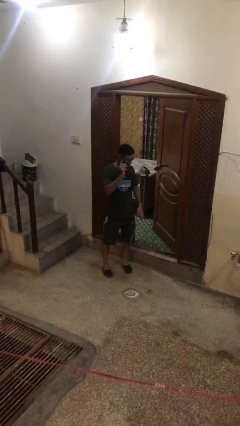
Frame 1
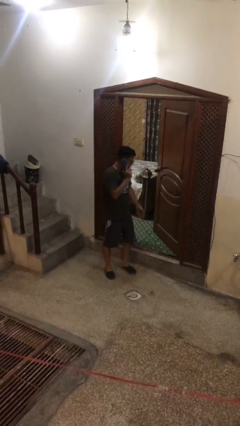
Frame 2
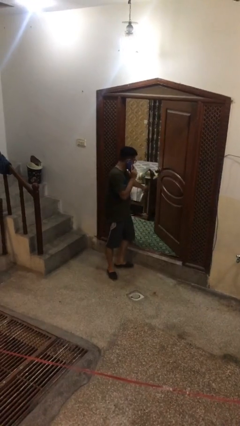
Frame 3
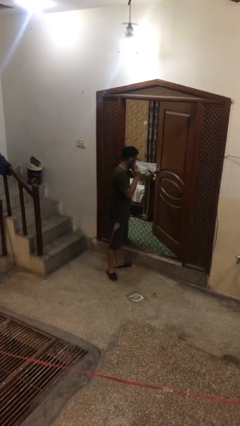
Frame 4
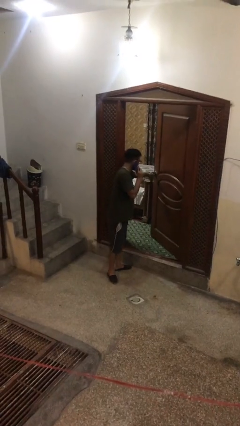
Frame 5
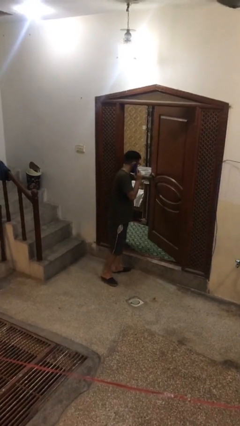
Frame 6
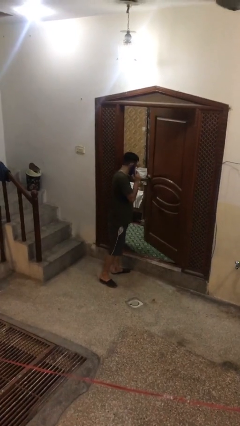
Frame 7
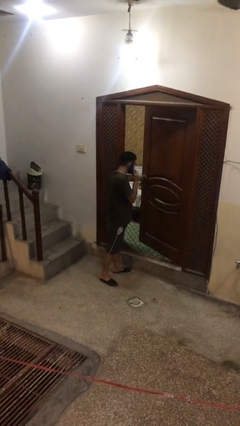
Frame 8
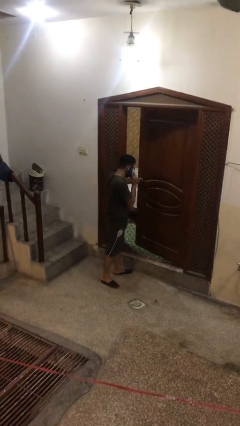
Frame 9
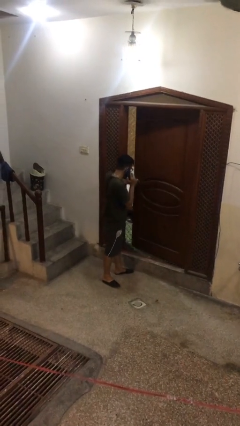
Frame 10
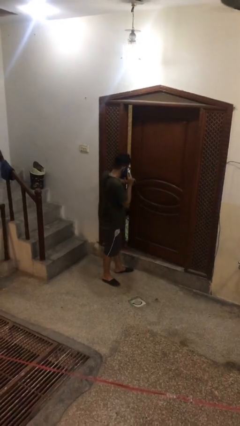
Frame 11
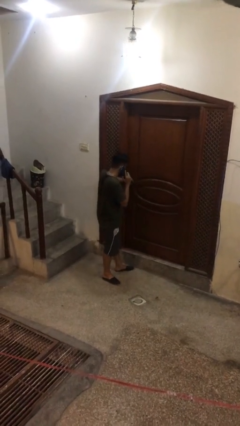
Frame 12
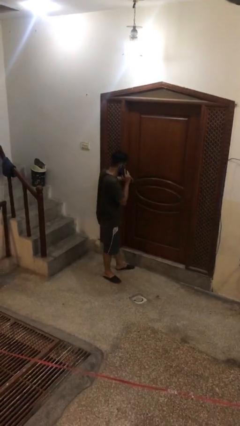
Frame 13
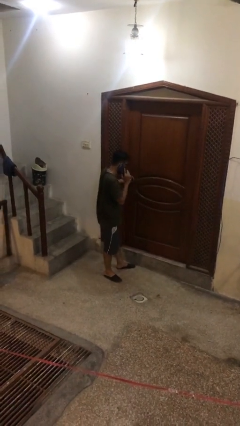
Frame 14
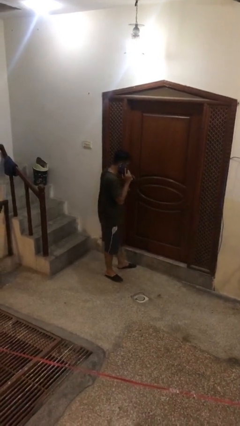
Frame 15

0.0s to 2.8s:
person closes facility door

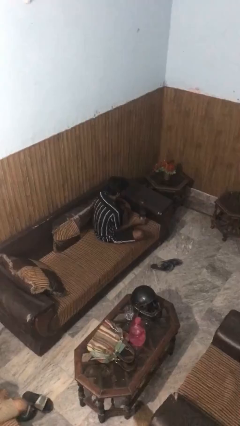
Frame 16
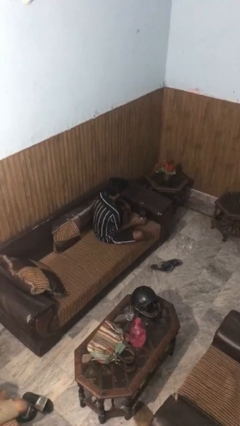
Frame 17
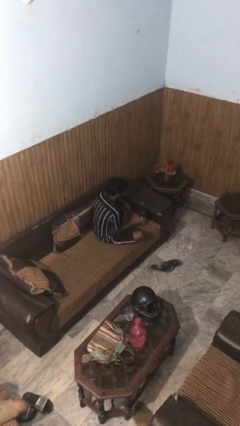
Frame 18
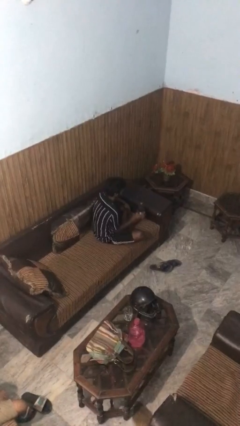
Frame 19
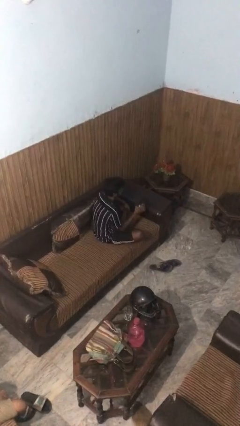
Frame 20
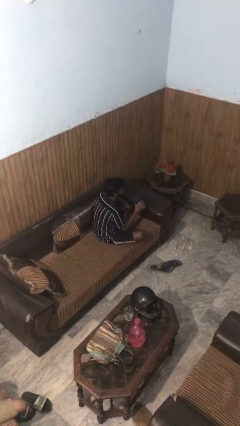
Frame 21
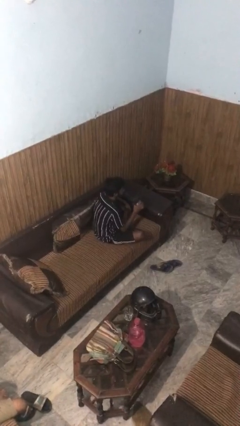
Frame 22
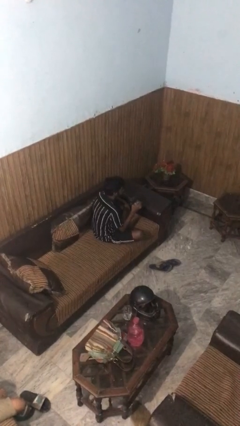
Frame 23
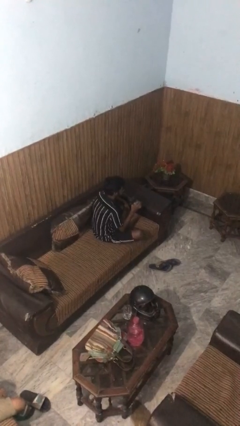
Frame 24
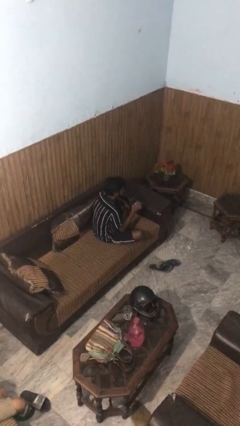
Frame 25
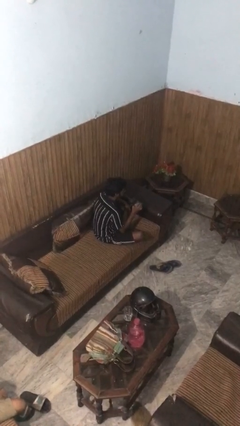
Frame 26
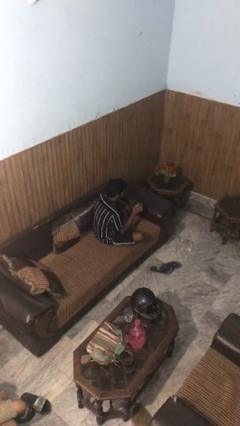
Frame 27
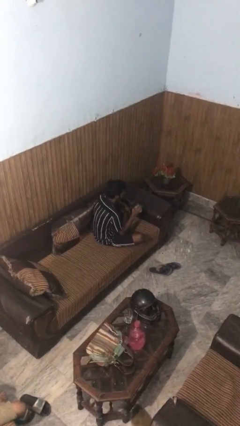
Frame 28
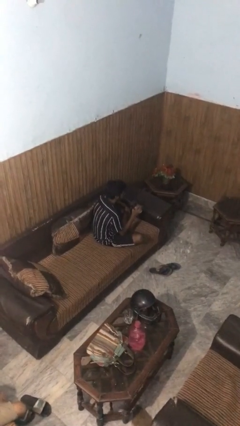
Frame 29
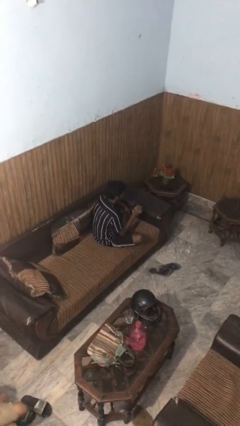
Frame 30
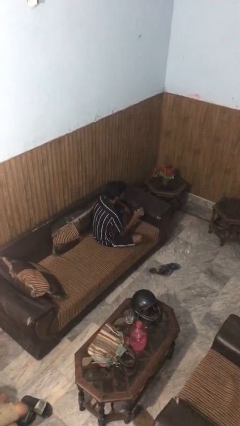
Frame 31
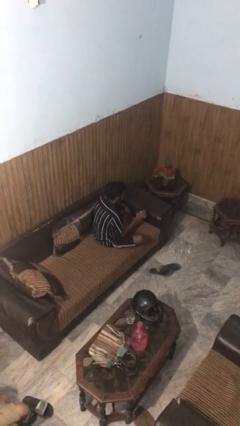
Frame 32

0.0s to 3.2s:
person drinks from straw

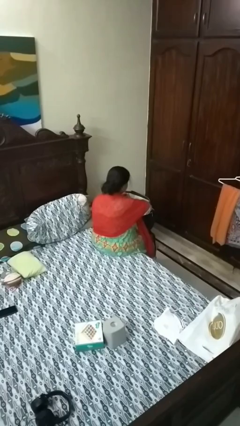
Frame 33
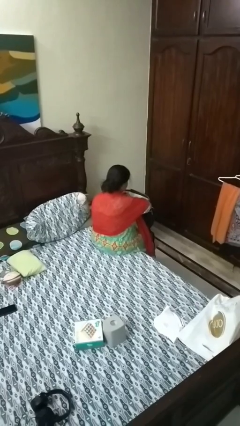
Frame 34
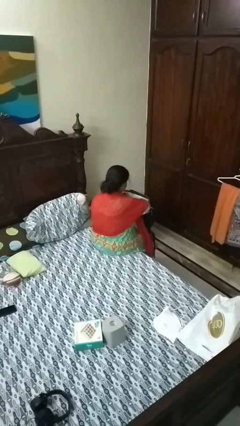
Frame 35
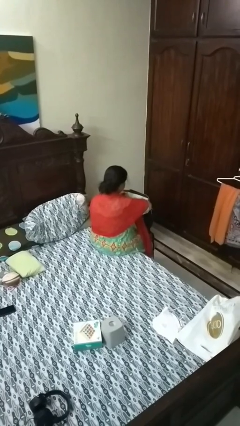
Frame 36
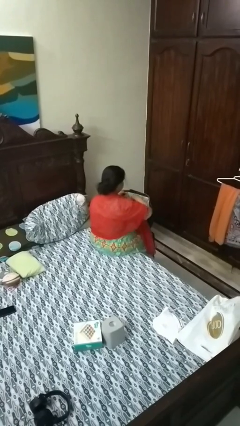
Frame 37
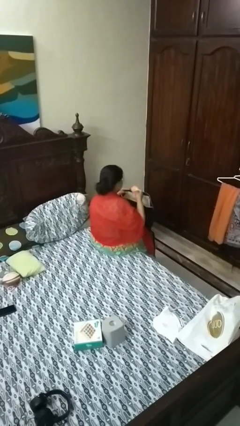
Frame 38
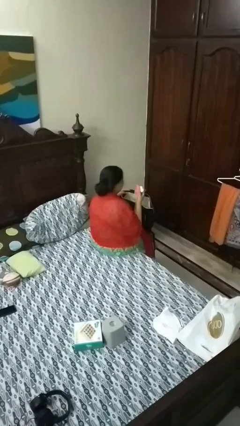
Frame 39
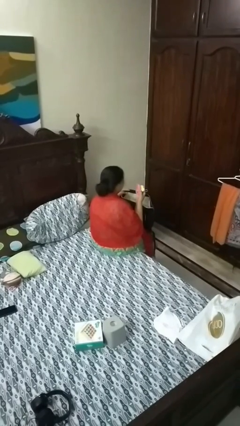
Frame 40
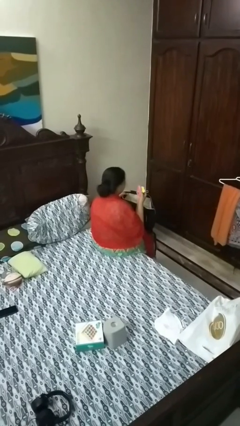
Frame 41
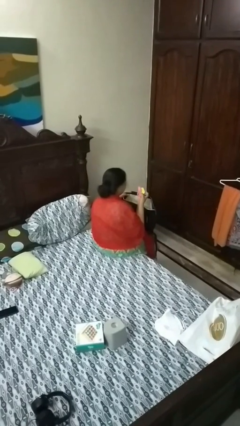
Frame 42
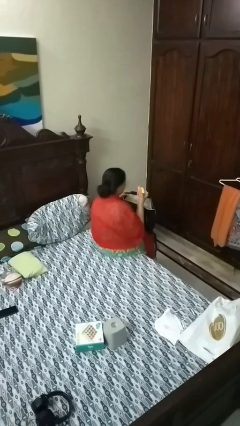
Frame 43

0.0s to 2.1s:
person takes object from backpack

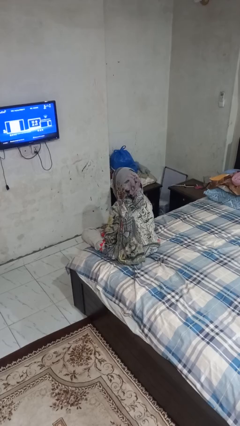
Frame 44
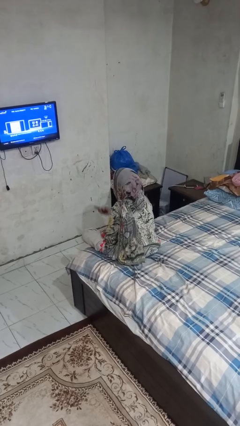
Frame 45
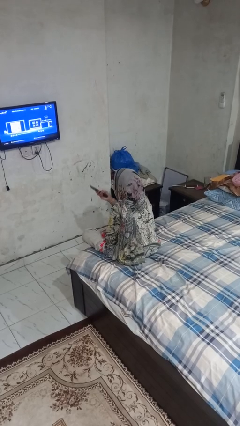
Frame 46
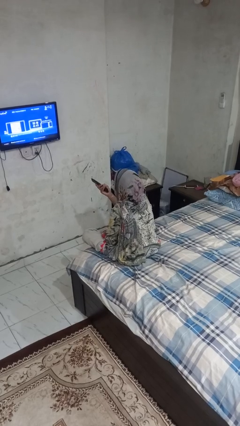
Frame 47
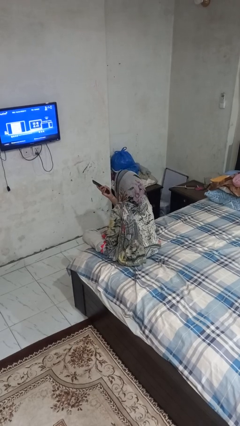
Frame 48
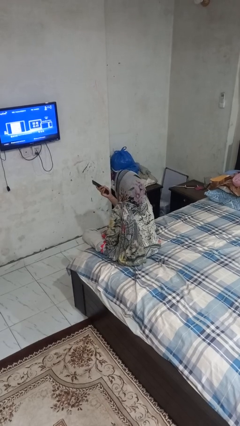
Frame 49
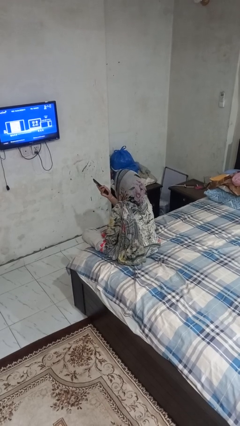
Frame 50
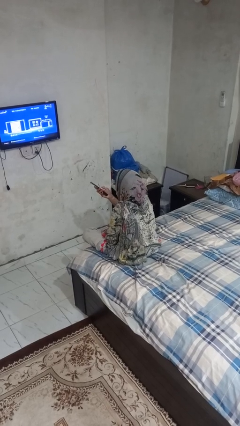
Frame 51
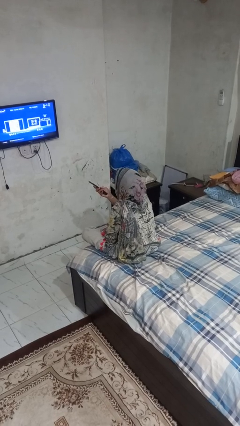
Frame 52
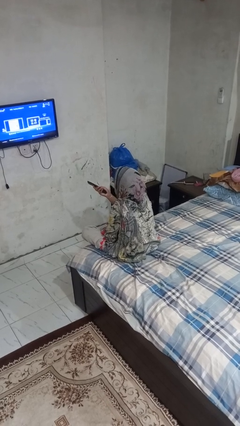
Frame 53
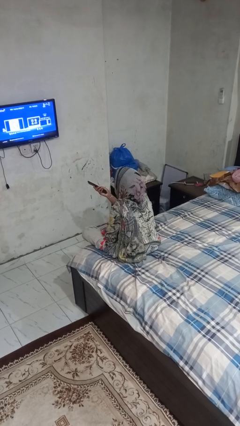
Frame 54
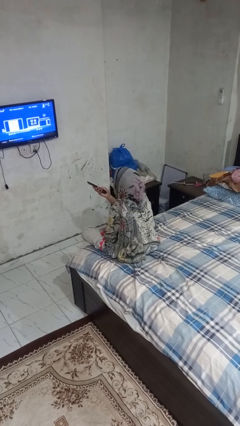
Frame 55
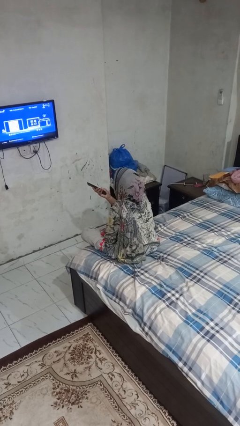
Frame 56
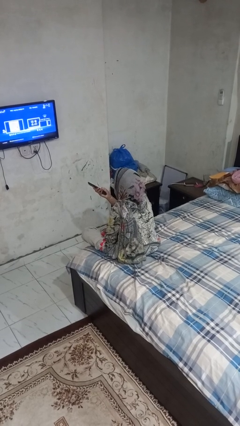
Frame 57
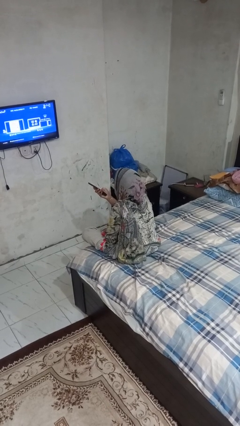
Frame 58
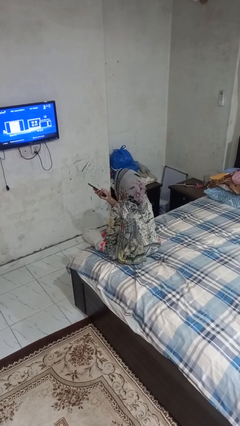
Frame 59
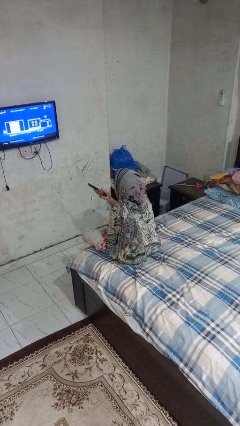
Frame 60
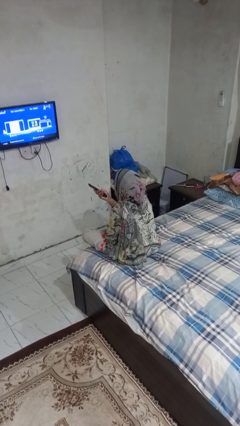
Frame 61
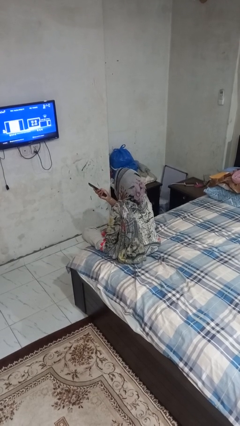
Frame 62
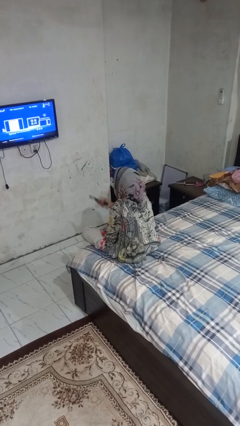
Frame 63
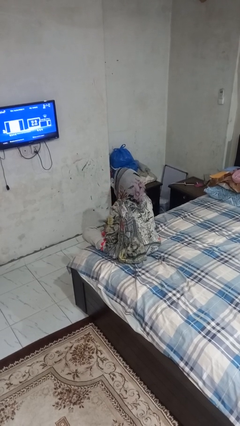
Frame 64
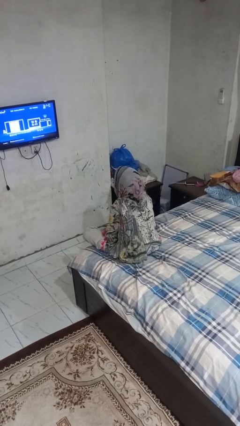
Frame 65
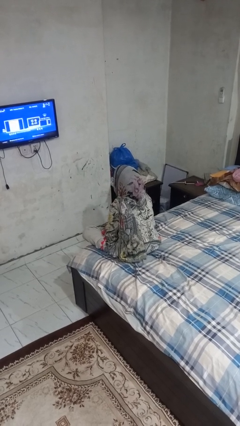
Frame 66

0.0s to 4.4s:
person uses television remote

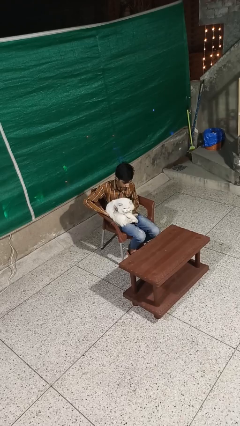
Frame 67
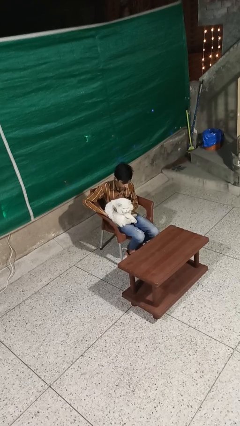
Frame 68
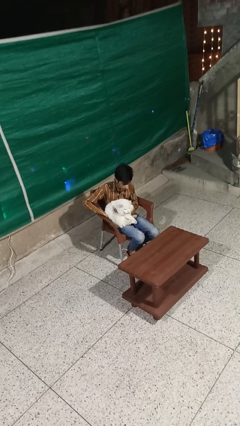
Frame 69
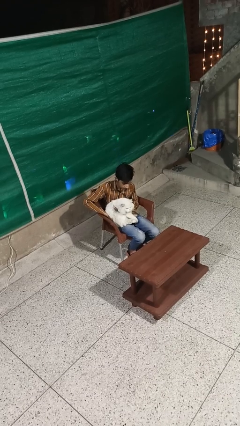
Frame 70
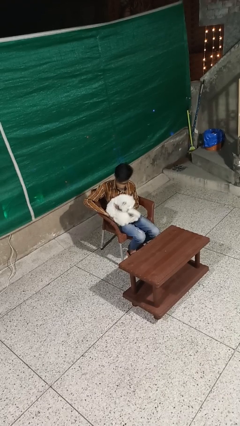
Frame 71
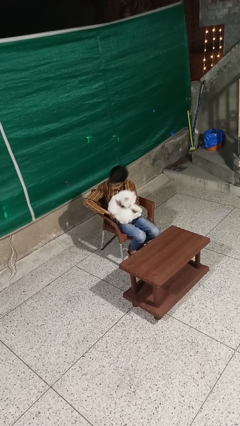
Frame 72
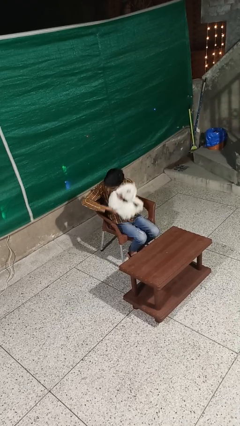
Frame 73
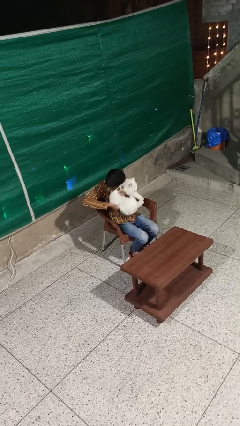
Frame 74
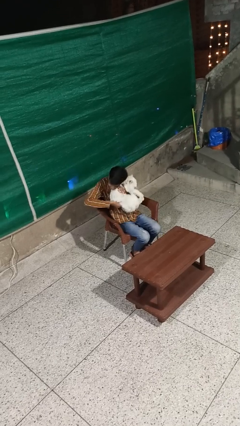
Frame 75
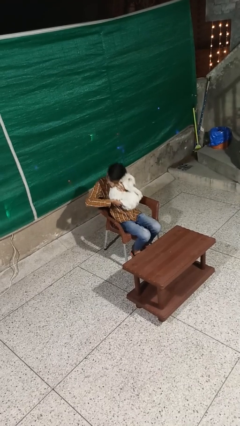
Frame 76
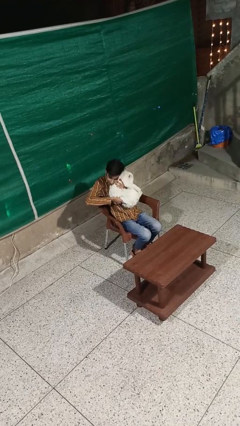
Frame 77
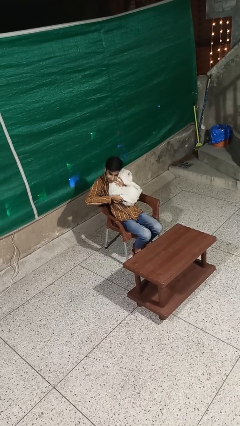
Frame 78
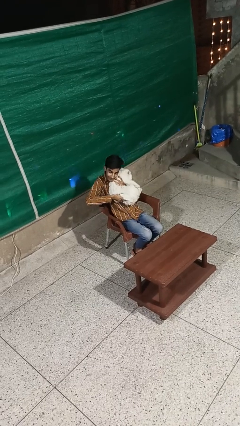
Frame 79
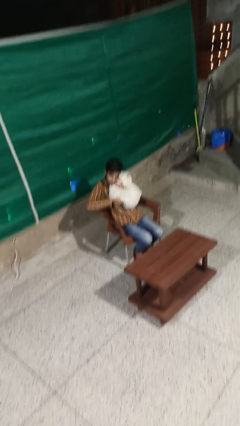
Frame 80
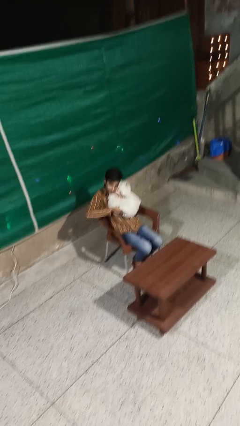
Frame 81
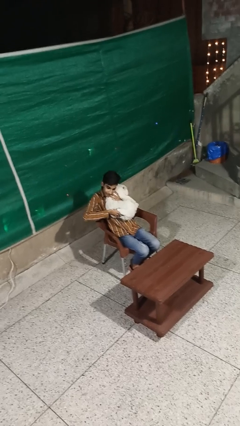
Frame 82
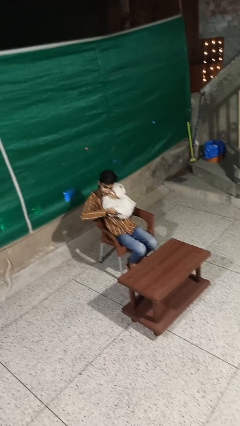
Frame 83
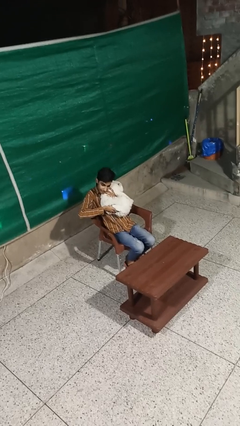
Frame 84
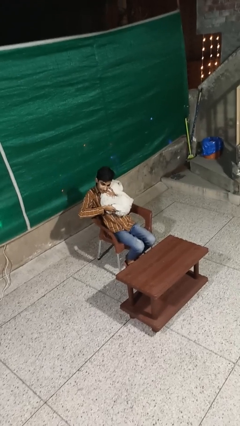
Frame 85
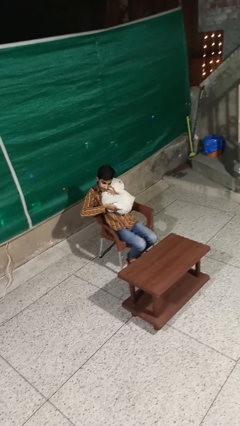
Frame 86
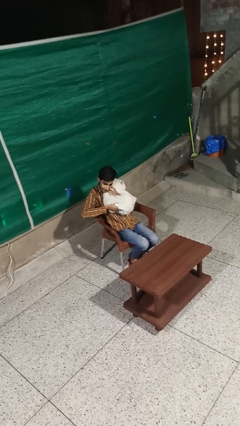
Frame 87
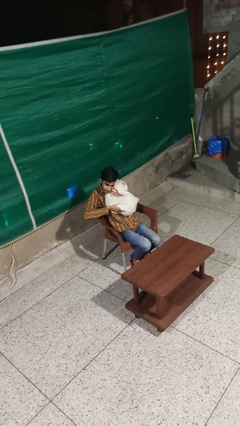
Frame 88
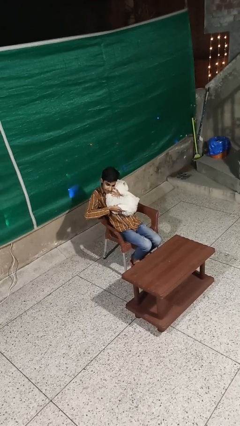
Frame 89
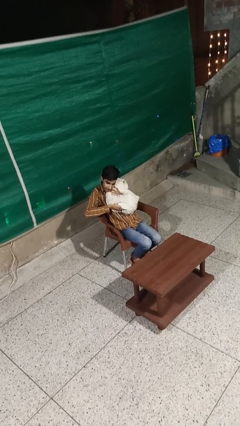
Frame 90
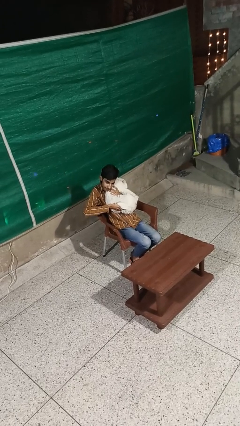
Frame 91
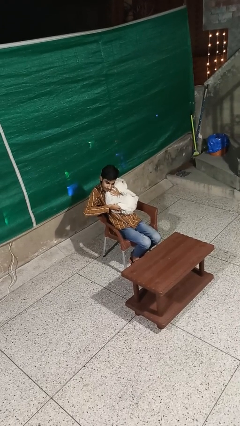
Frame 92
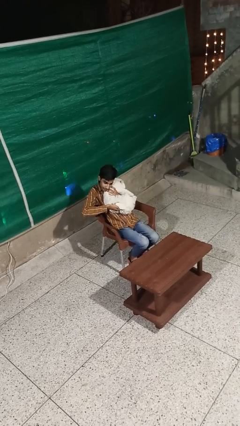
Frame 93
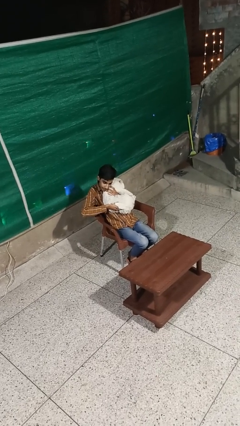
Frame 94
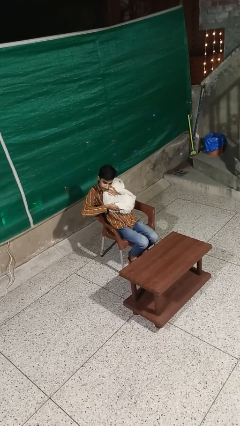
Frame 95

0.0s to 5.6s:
person hugs cat
